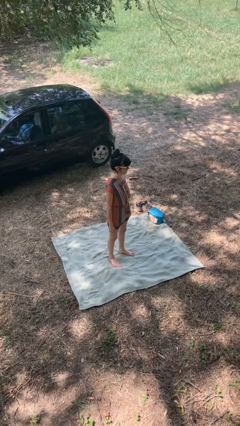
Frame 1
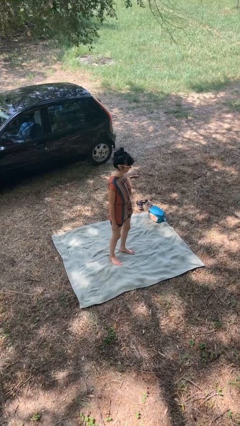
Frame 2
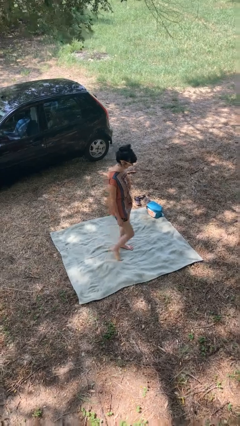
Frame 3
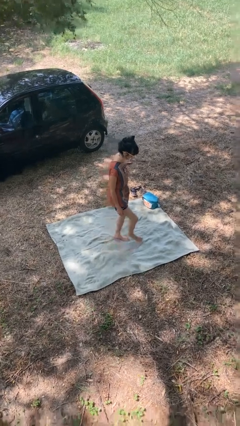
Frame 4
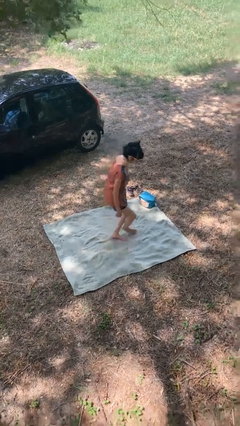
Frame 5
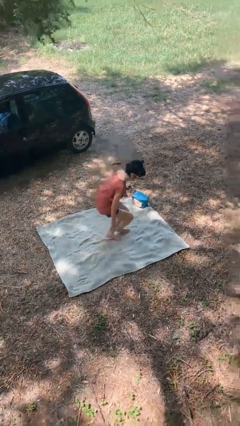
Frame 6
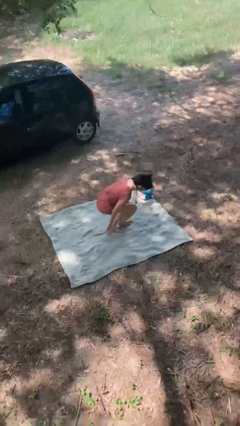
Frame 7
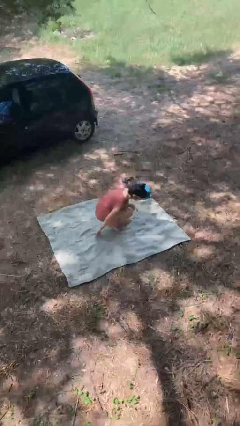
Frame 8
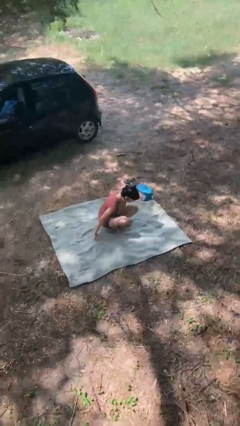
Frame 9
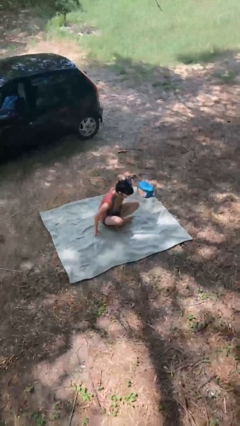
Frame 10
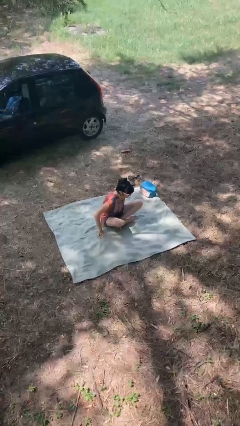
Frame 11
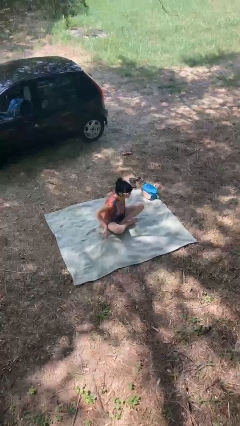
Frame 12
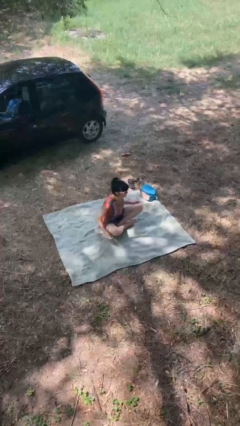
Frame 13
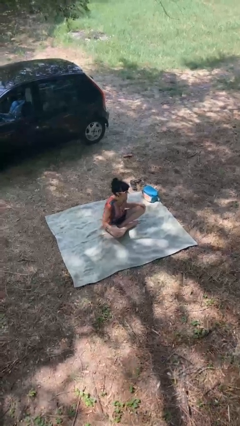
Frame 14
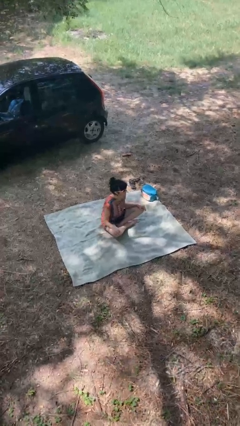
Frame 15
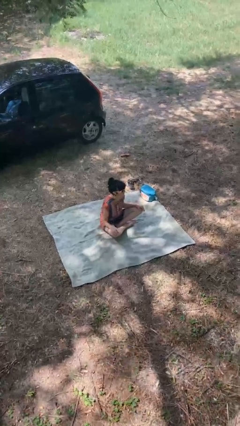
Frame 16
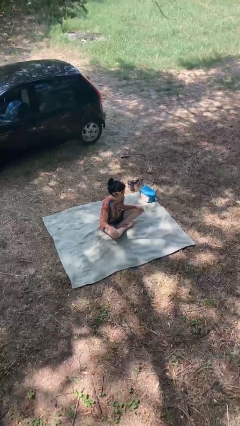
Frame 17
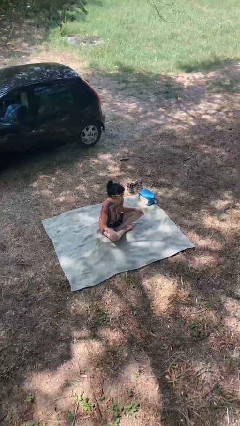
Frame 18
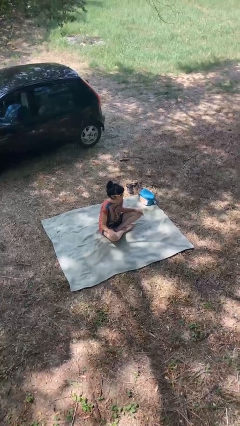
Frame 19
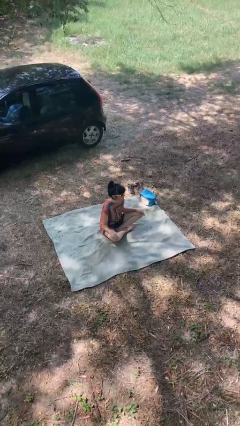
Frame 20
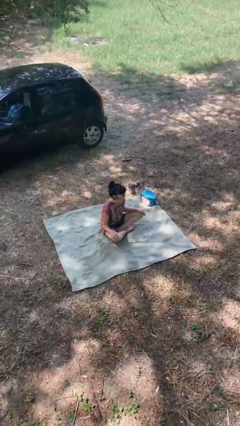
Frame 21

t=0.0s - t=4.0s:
person sits crisscross

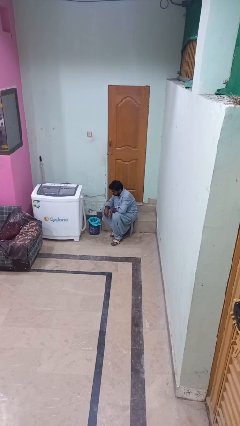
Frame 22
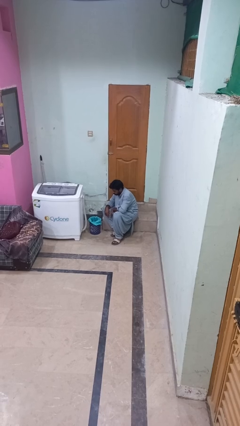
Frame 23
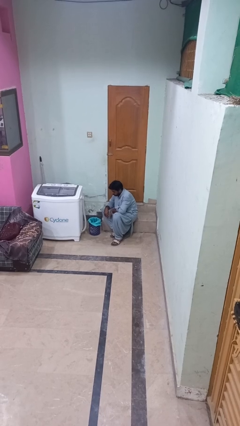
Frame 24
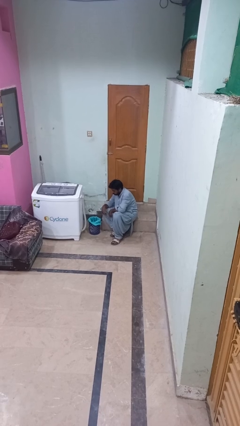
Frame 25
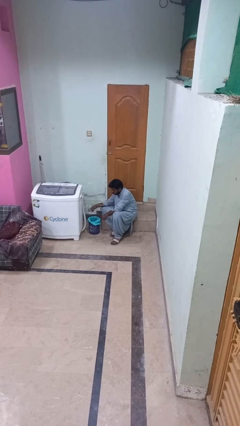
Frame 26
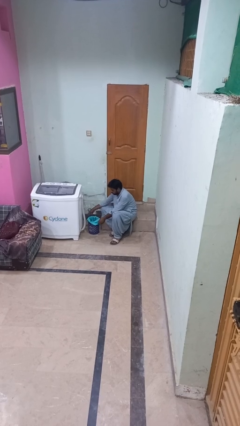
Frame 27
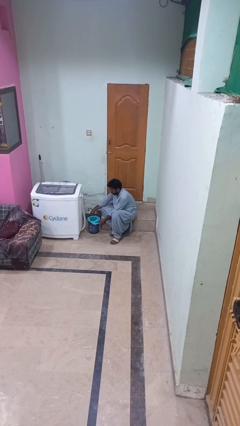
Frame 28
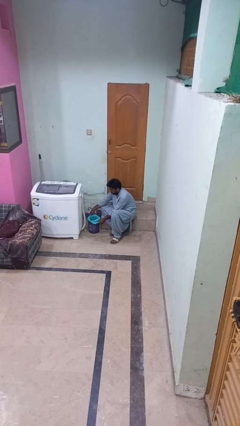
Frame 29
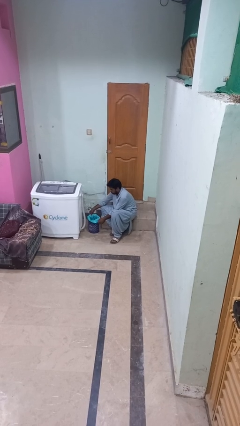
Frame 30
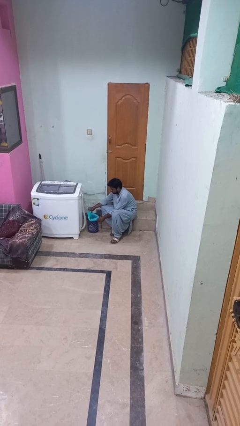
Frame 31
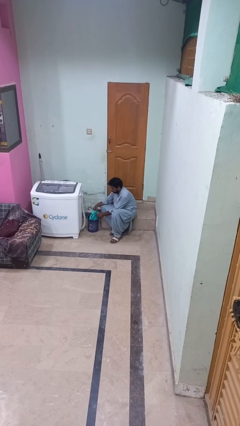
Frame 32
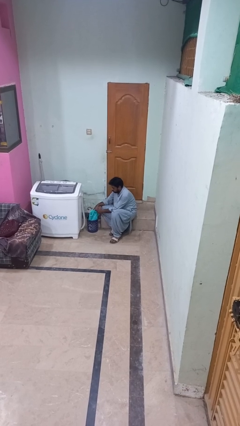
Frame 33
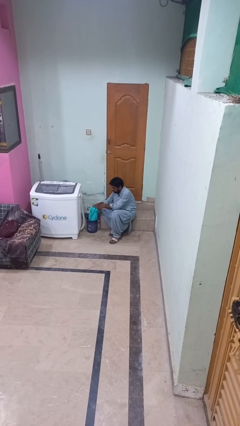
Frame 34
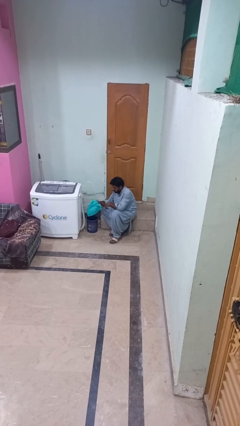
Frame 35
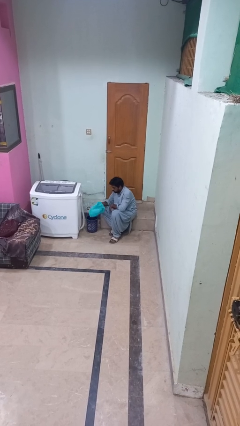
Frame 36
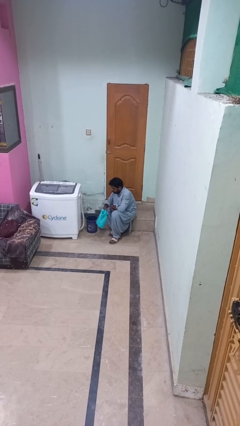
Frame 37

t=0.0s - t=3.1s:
person removes trashbag from trashcan

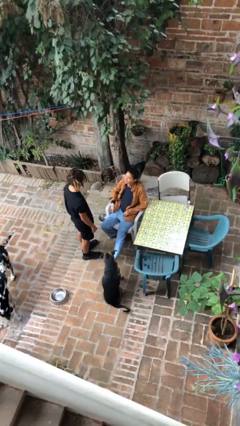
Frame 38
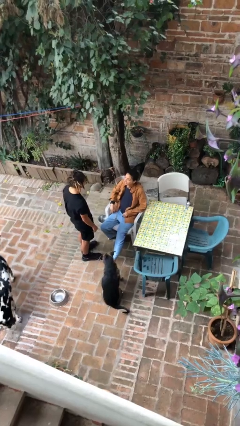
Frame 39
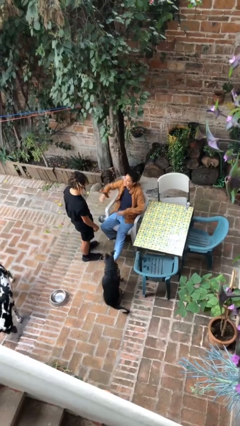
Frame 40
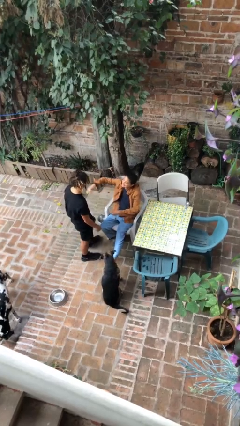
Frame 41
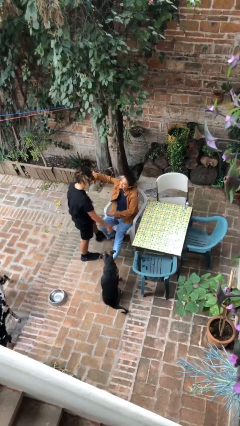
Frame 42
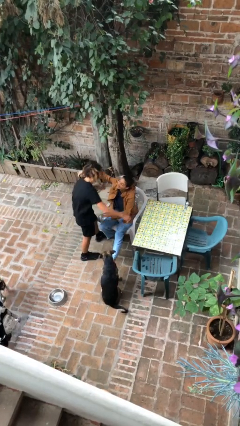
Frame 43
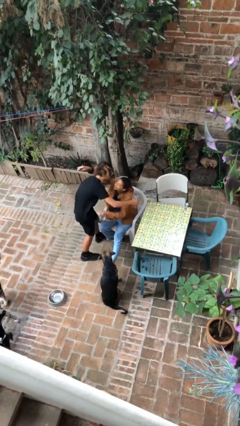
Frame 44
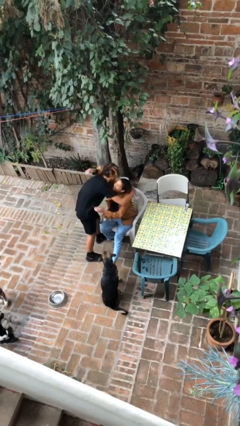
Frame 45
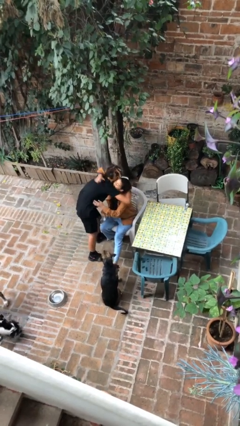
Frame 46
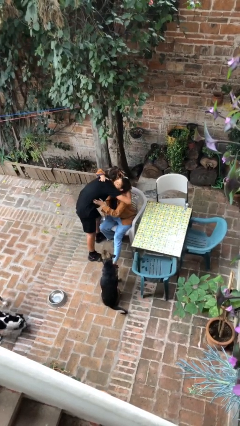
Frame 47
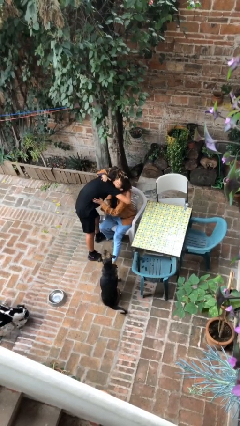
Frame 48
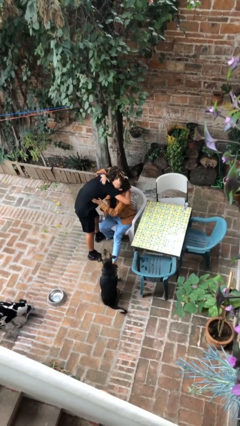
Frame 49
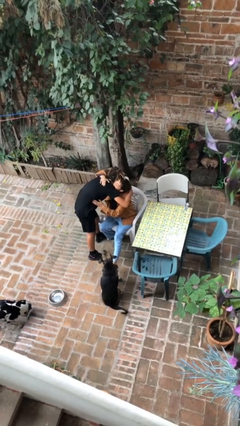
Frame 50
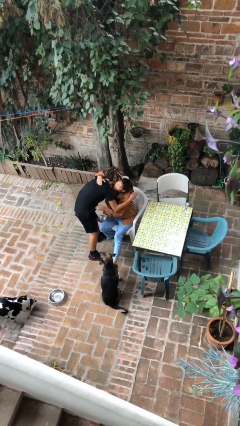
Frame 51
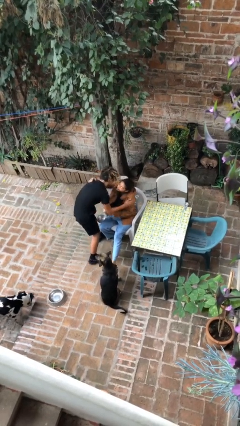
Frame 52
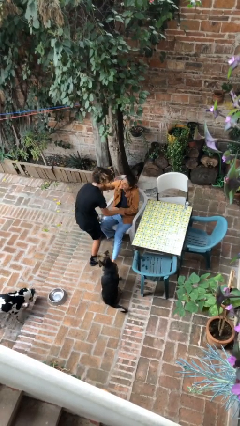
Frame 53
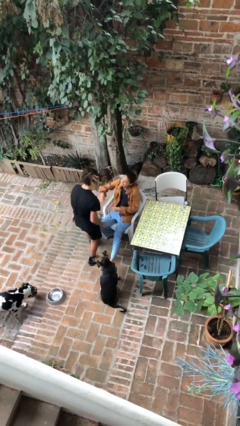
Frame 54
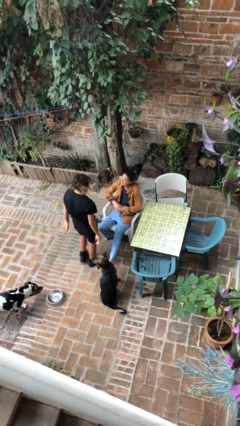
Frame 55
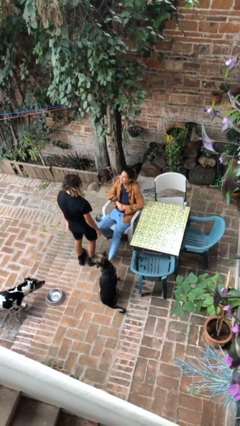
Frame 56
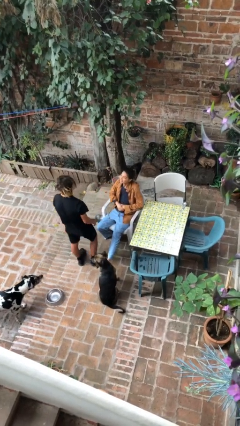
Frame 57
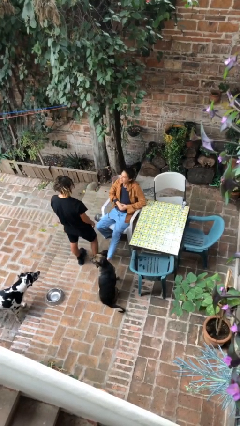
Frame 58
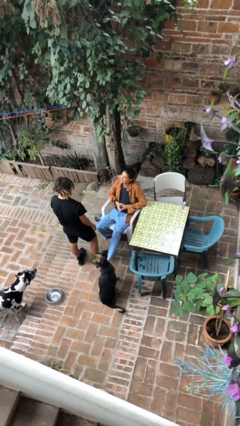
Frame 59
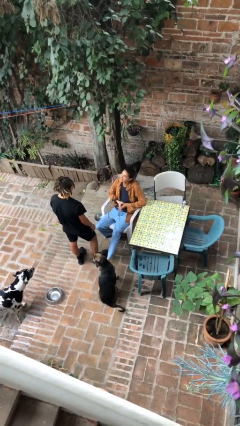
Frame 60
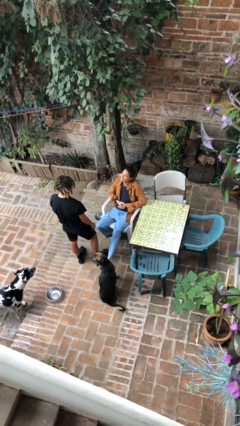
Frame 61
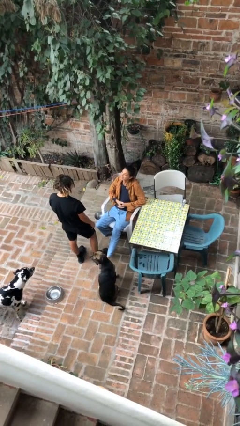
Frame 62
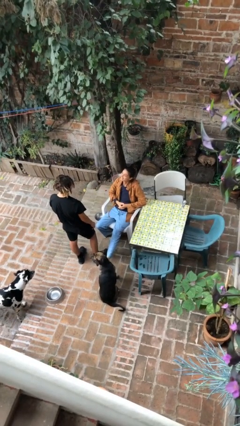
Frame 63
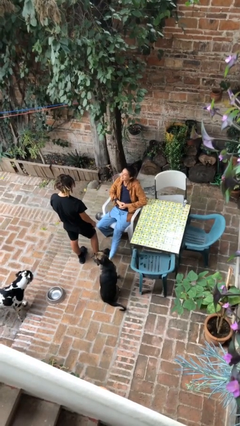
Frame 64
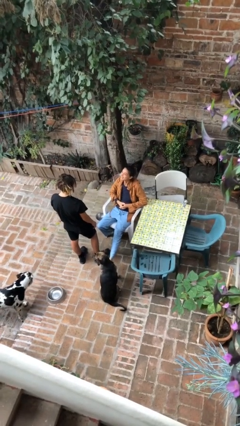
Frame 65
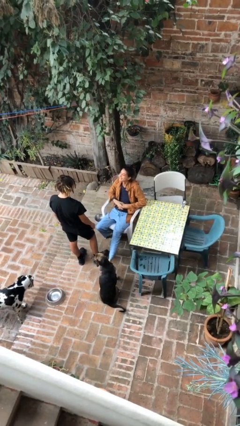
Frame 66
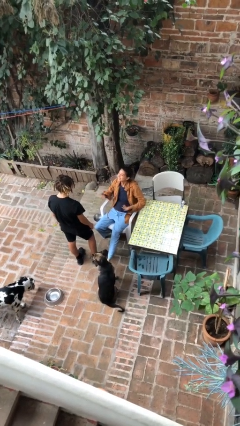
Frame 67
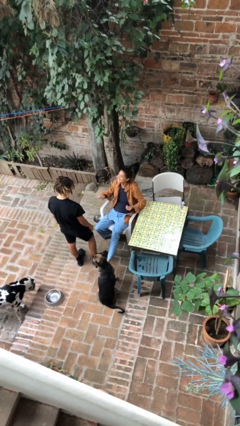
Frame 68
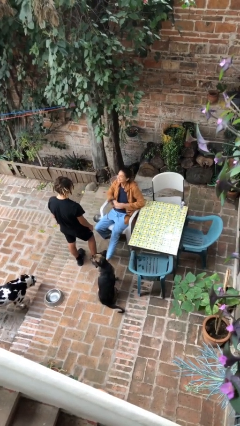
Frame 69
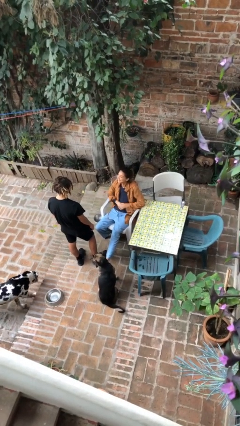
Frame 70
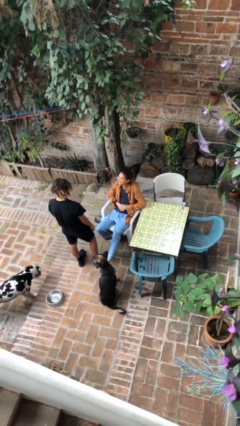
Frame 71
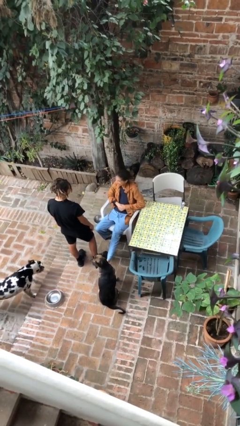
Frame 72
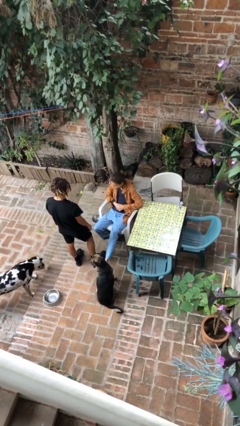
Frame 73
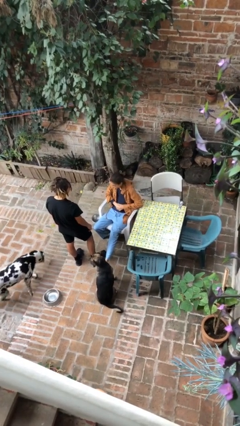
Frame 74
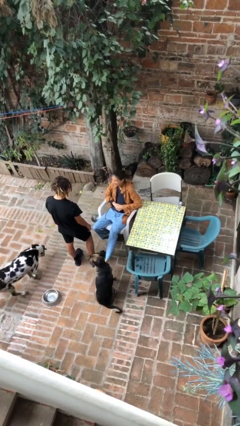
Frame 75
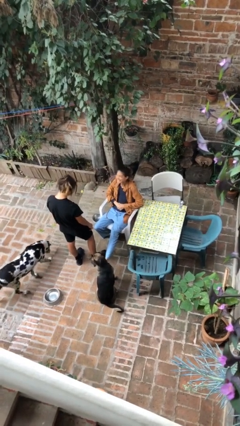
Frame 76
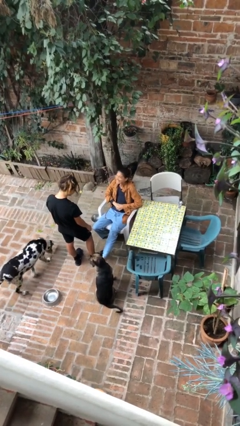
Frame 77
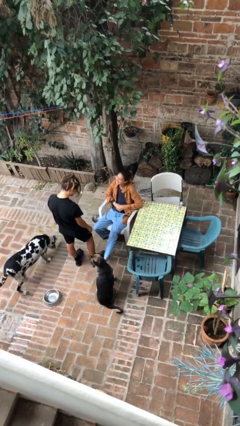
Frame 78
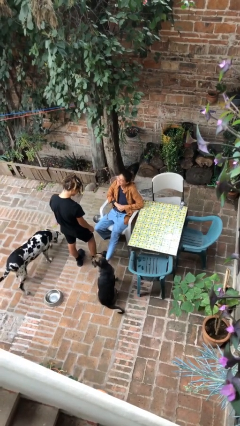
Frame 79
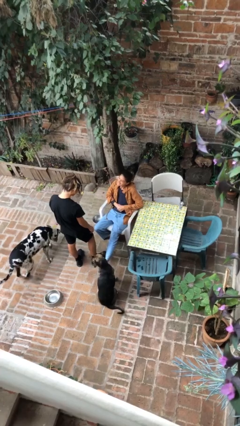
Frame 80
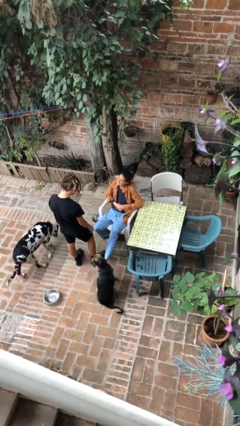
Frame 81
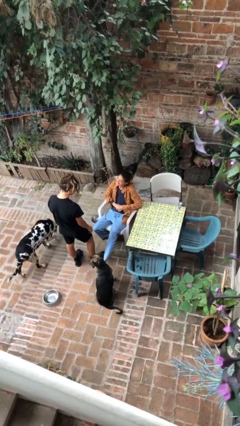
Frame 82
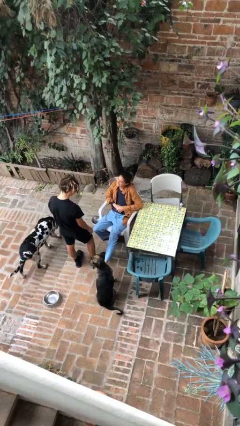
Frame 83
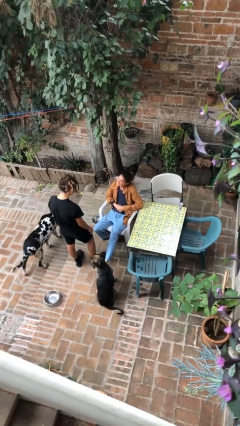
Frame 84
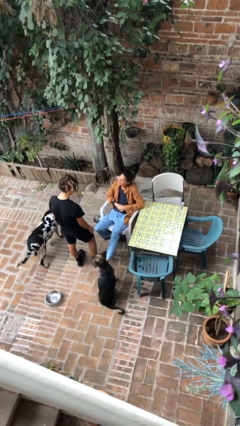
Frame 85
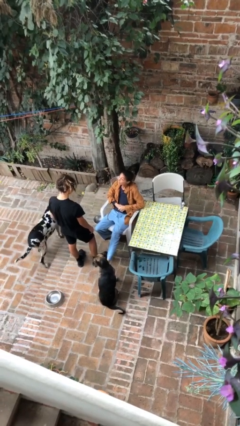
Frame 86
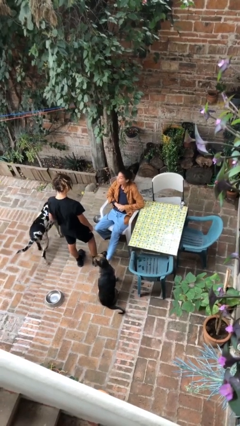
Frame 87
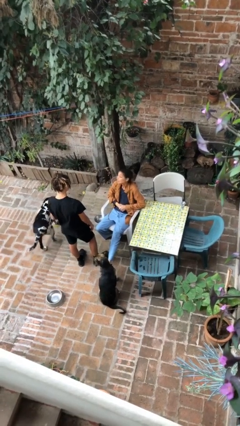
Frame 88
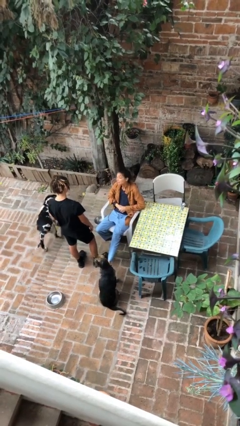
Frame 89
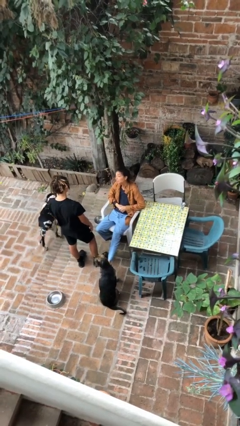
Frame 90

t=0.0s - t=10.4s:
person embraces person

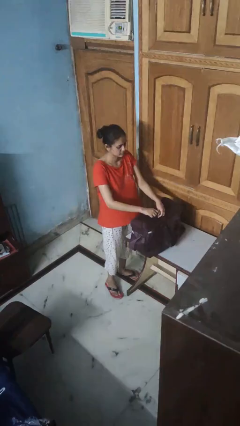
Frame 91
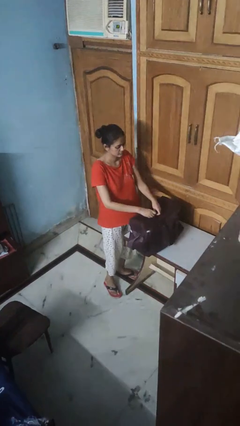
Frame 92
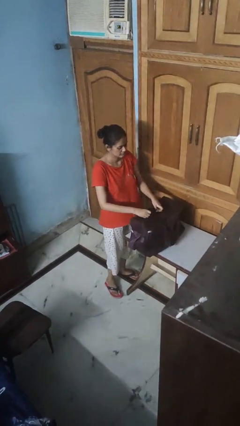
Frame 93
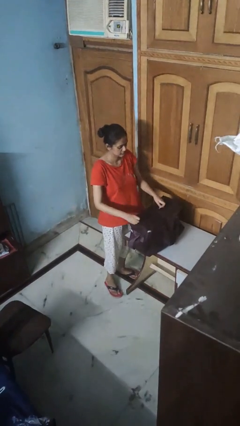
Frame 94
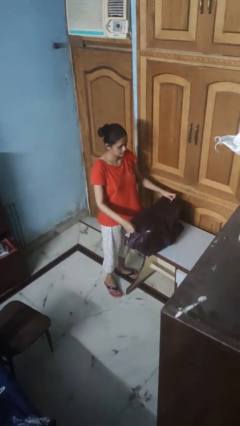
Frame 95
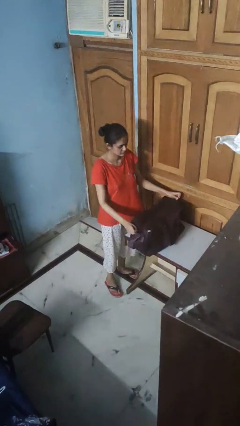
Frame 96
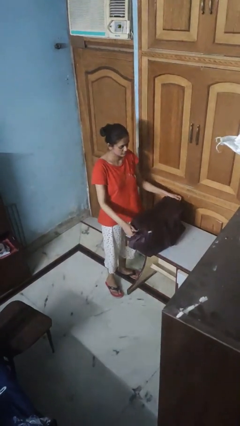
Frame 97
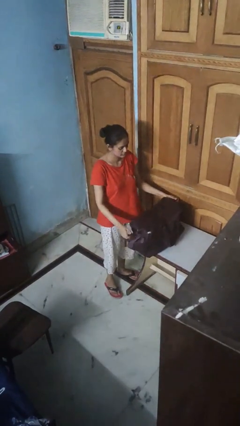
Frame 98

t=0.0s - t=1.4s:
person opens suitcase
